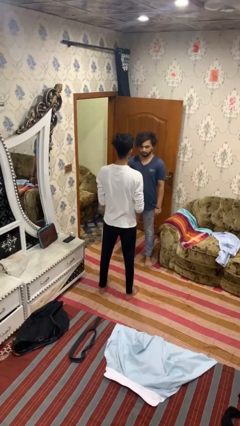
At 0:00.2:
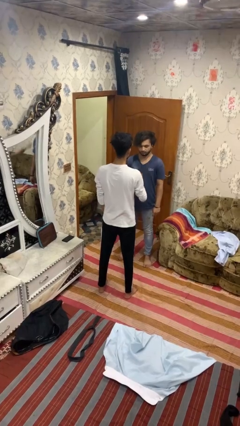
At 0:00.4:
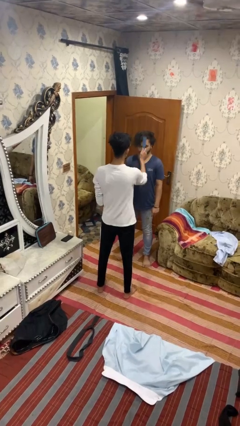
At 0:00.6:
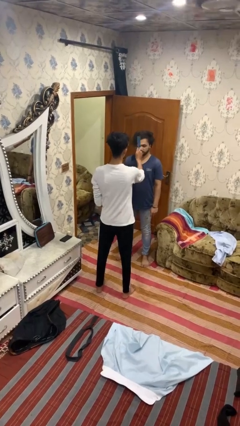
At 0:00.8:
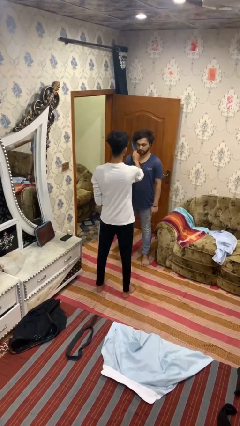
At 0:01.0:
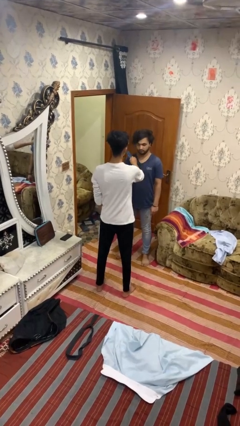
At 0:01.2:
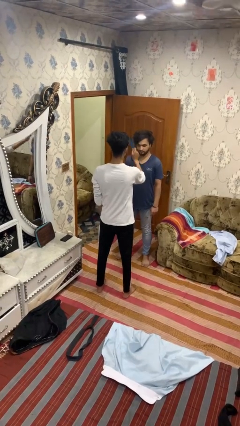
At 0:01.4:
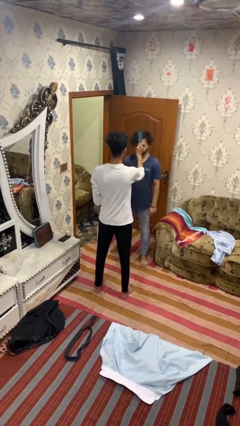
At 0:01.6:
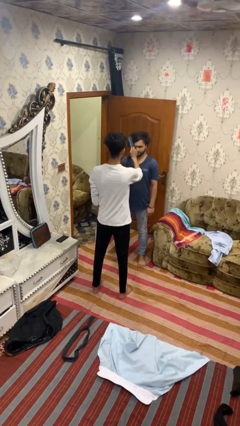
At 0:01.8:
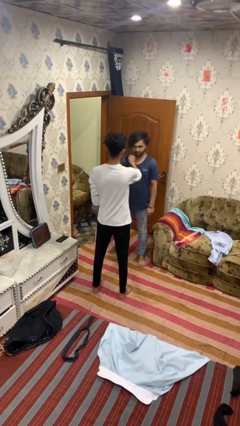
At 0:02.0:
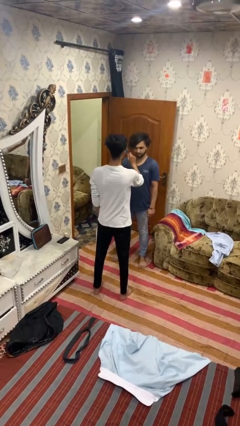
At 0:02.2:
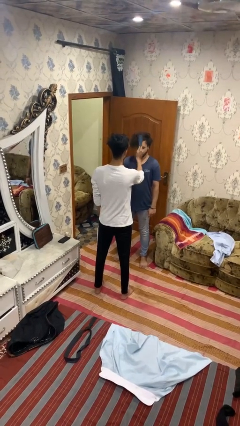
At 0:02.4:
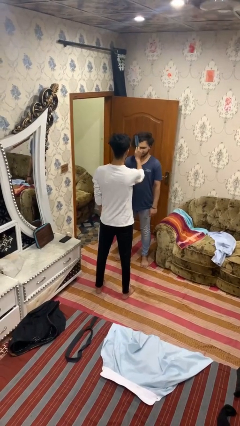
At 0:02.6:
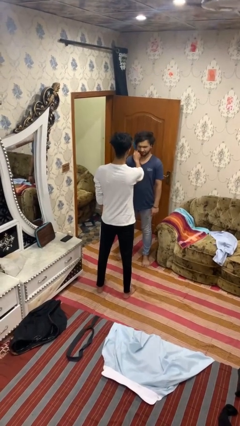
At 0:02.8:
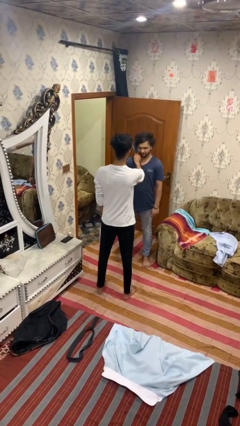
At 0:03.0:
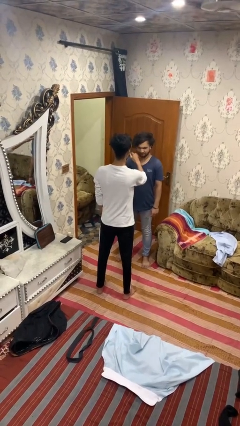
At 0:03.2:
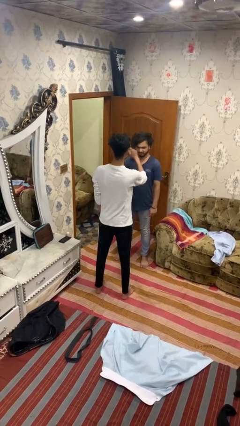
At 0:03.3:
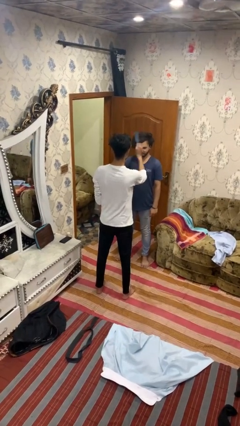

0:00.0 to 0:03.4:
person brushes hair of person

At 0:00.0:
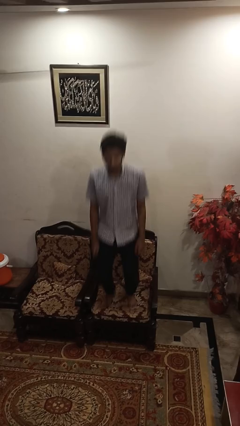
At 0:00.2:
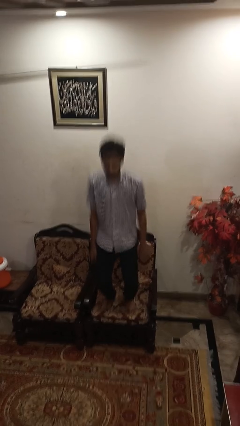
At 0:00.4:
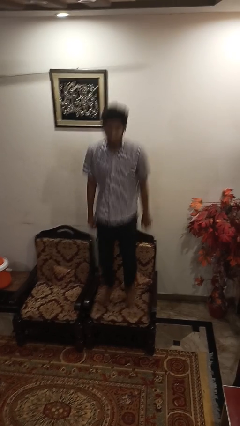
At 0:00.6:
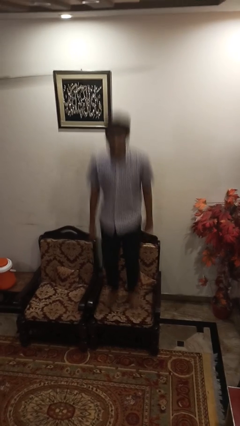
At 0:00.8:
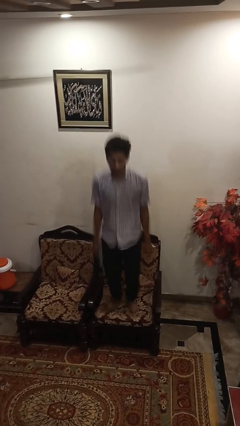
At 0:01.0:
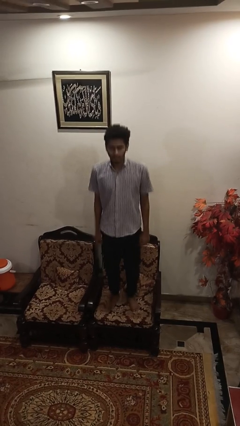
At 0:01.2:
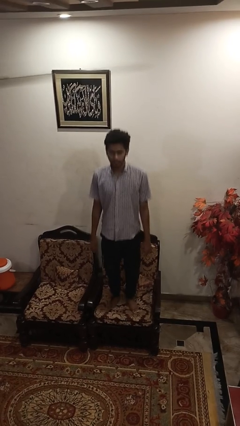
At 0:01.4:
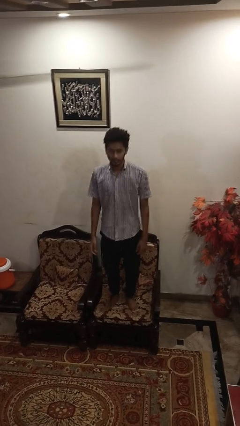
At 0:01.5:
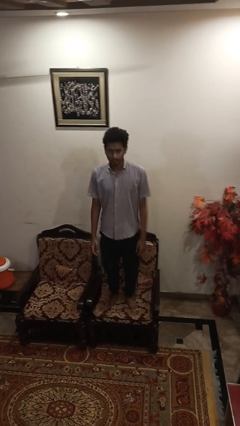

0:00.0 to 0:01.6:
person jumps on couch

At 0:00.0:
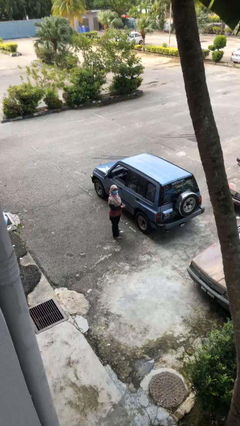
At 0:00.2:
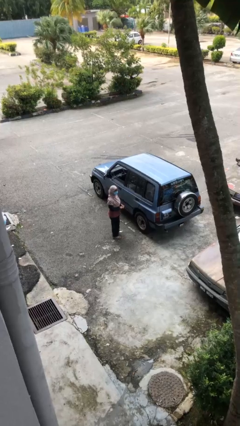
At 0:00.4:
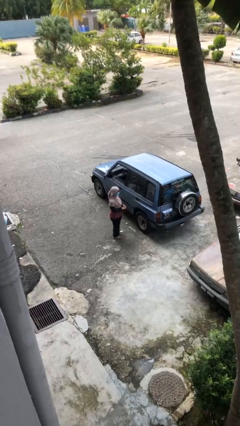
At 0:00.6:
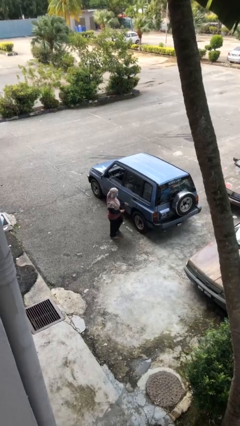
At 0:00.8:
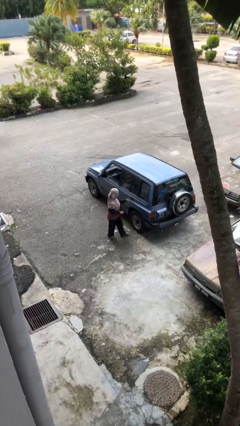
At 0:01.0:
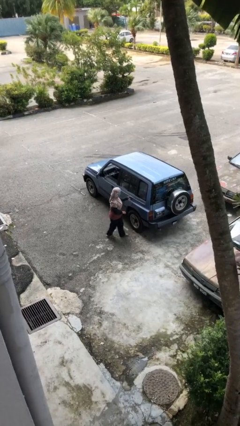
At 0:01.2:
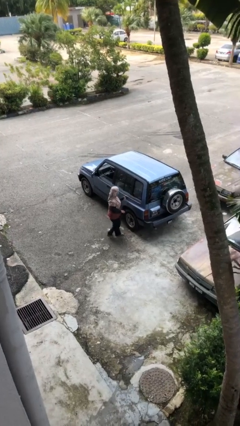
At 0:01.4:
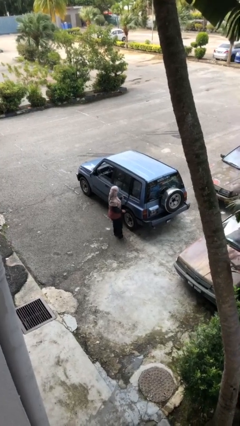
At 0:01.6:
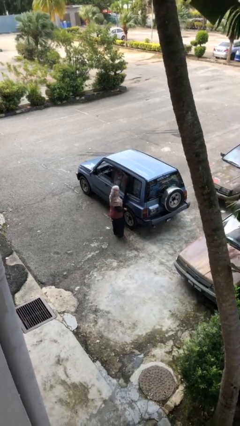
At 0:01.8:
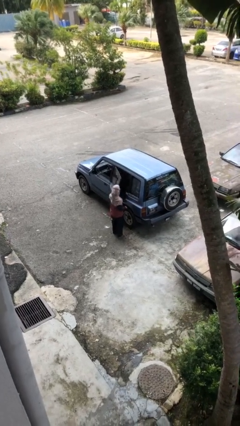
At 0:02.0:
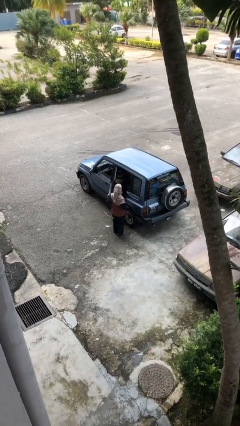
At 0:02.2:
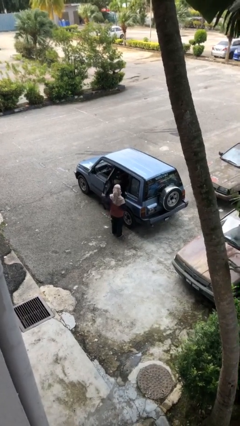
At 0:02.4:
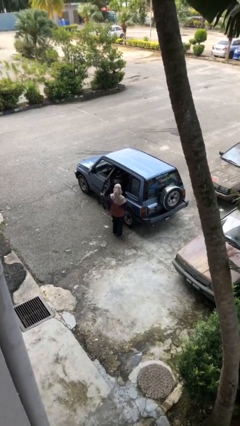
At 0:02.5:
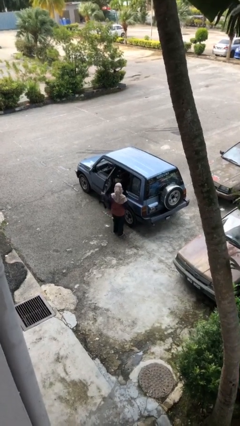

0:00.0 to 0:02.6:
person opens car door

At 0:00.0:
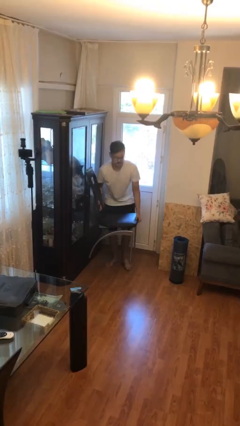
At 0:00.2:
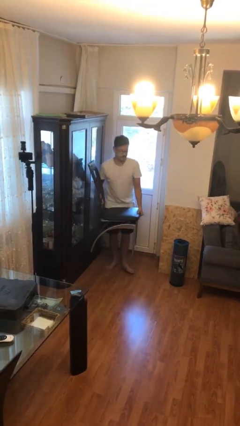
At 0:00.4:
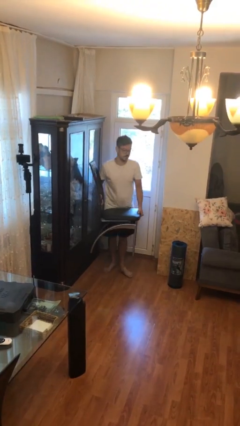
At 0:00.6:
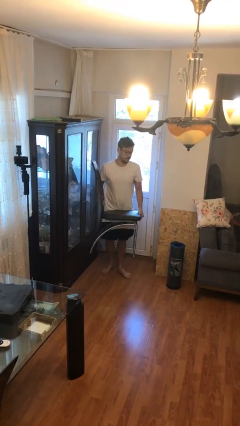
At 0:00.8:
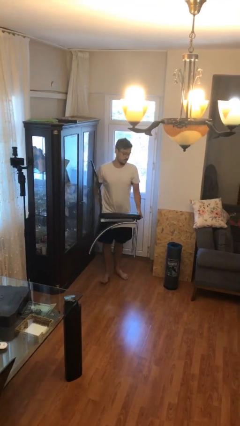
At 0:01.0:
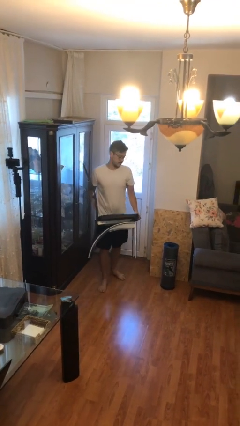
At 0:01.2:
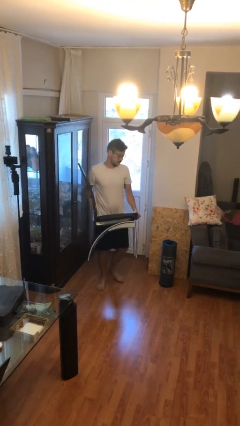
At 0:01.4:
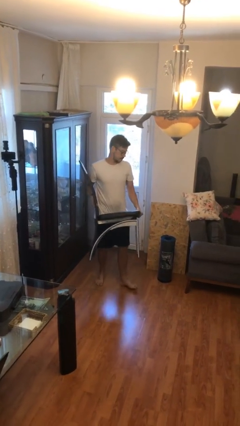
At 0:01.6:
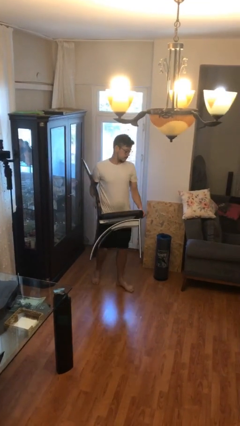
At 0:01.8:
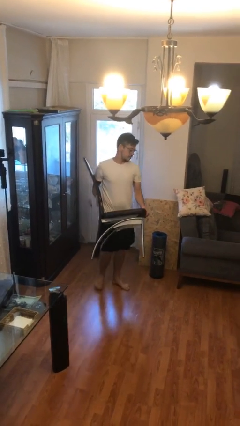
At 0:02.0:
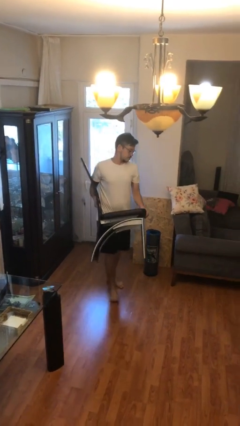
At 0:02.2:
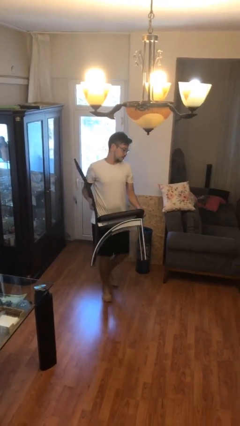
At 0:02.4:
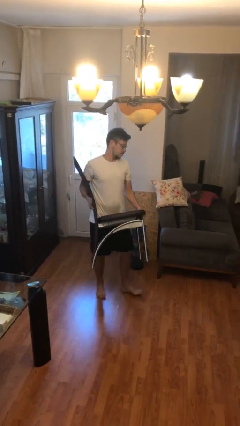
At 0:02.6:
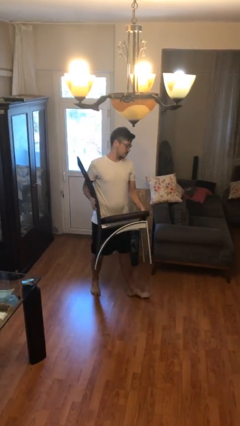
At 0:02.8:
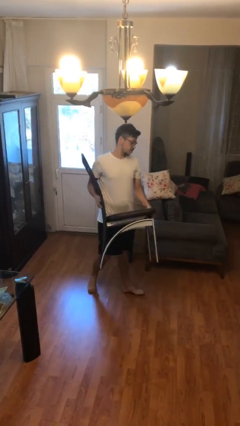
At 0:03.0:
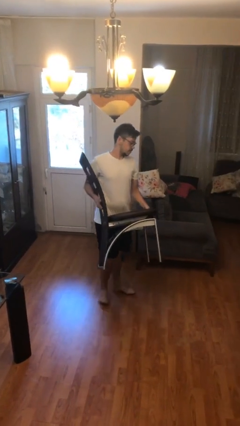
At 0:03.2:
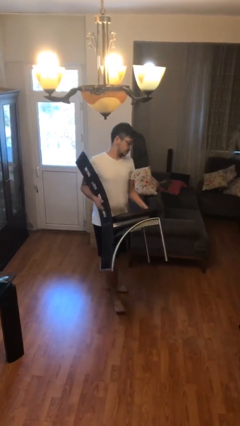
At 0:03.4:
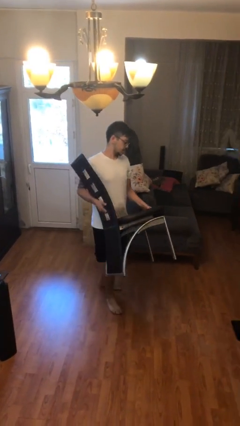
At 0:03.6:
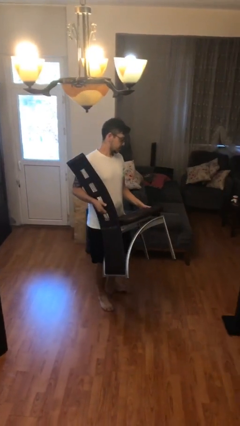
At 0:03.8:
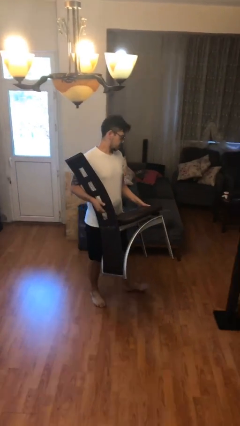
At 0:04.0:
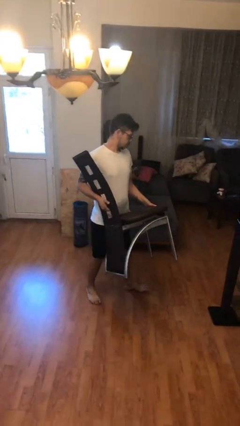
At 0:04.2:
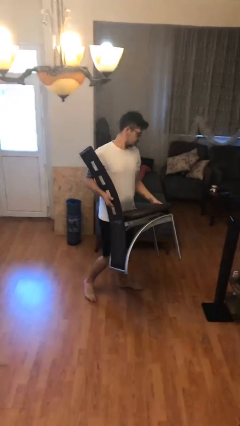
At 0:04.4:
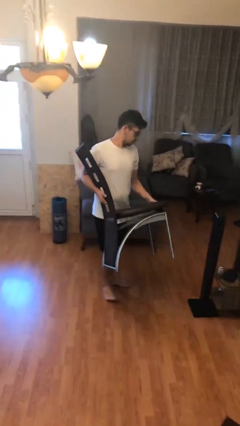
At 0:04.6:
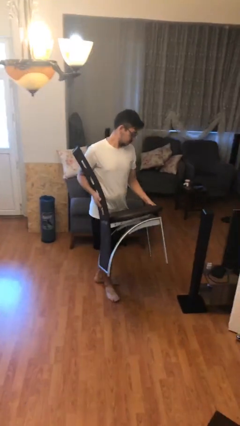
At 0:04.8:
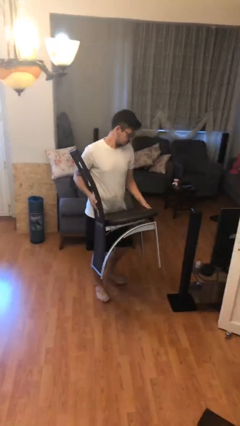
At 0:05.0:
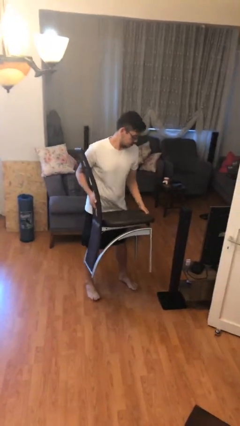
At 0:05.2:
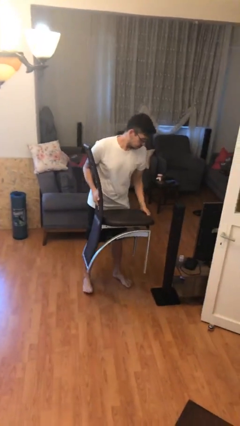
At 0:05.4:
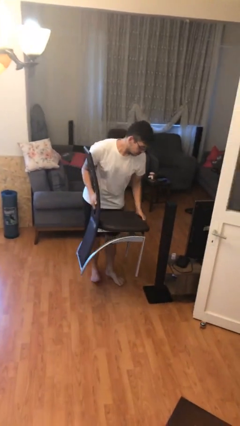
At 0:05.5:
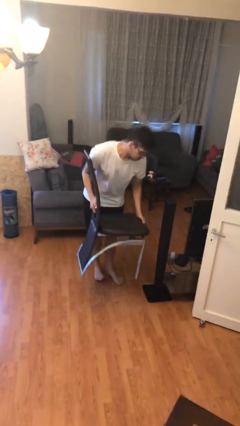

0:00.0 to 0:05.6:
person carries heavy object

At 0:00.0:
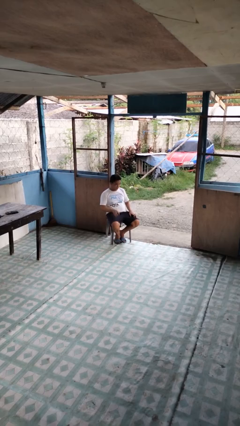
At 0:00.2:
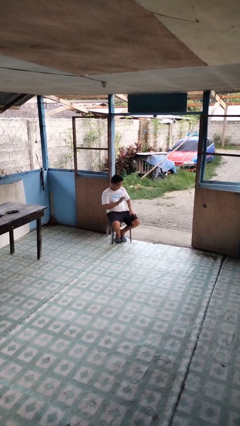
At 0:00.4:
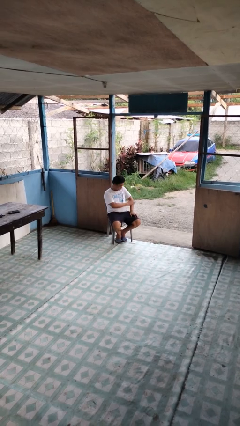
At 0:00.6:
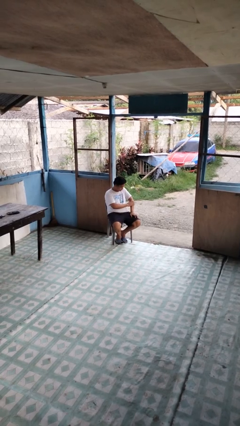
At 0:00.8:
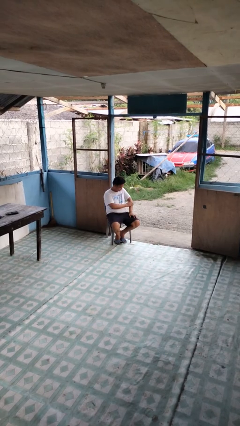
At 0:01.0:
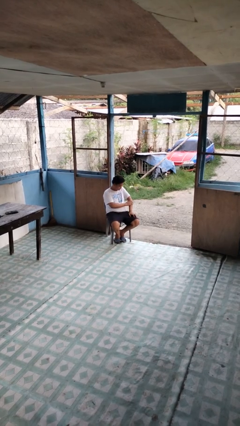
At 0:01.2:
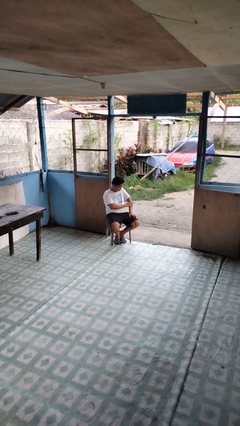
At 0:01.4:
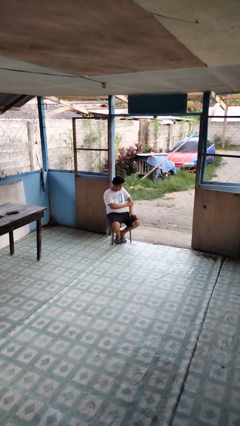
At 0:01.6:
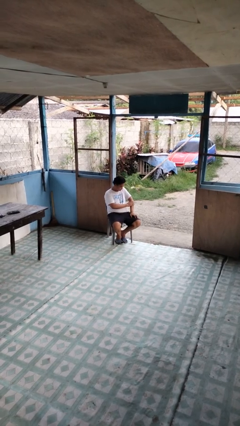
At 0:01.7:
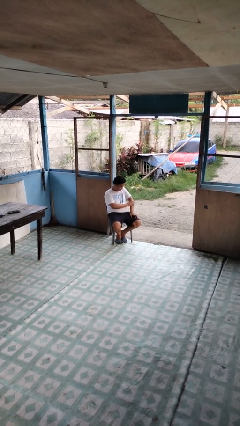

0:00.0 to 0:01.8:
person swats bug

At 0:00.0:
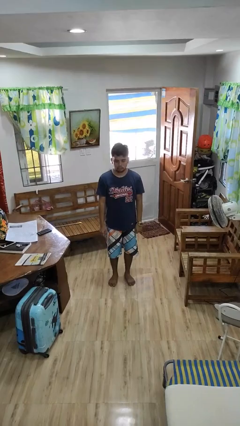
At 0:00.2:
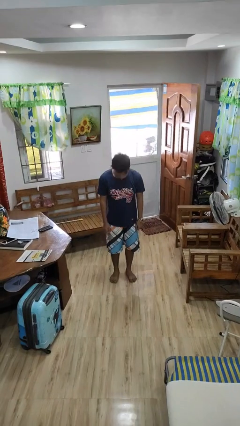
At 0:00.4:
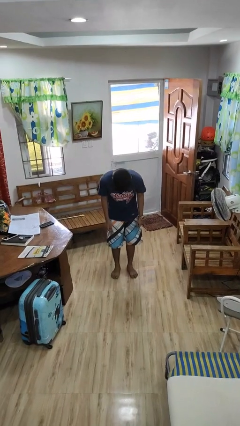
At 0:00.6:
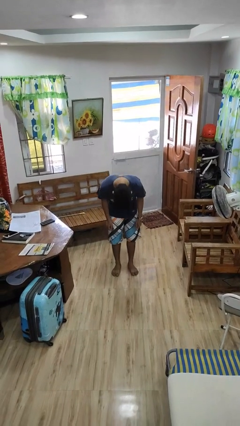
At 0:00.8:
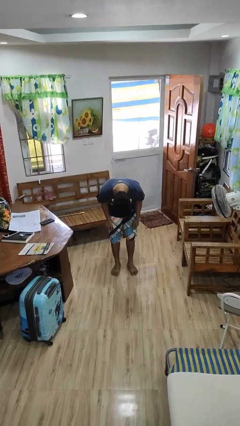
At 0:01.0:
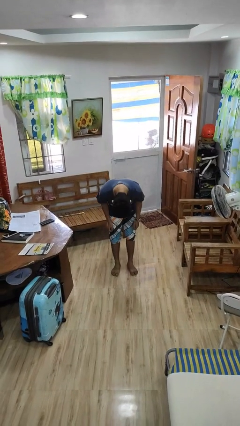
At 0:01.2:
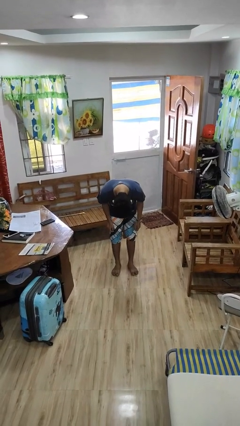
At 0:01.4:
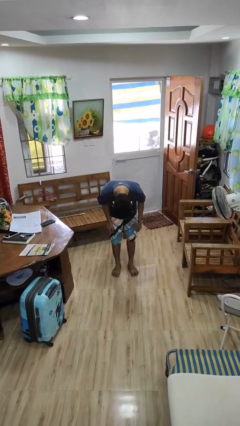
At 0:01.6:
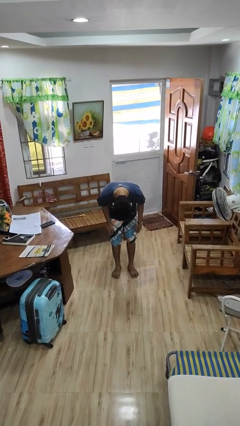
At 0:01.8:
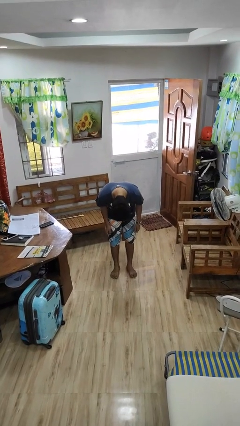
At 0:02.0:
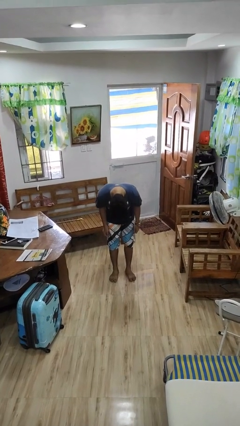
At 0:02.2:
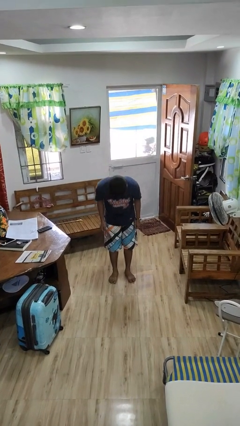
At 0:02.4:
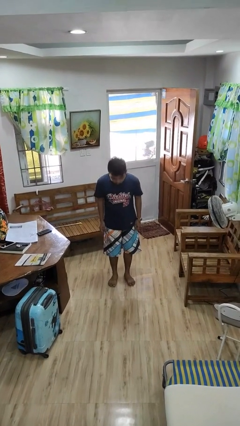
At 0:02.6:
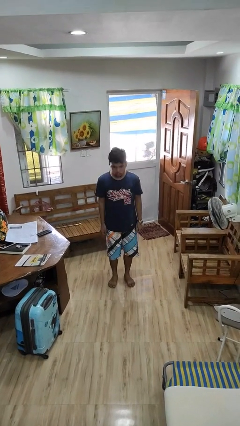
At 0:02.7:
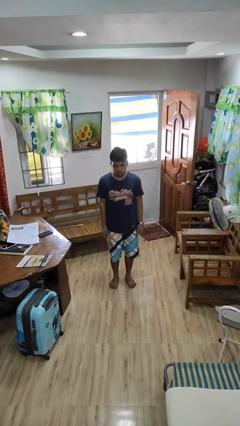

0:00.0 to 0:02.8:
person bows
